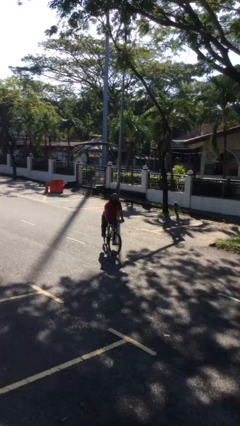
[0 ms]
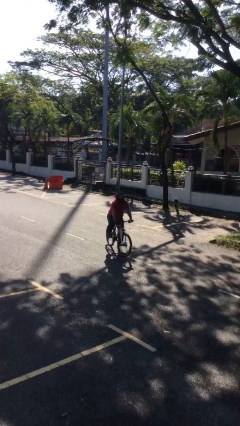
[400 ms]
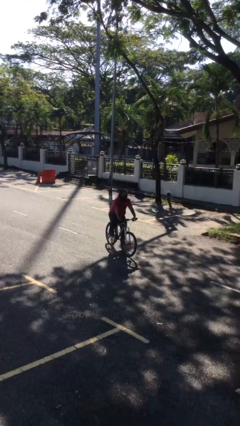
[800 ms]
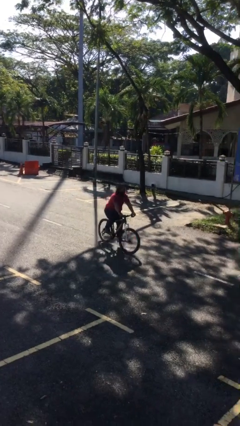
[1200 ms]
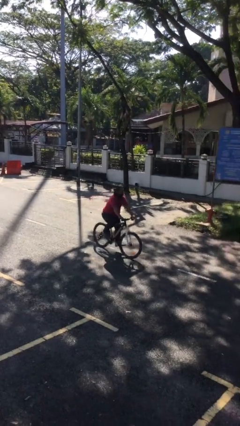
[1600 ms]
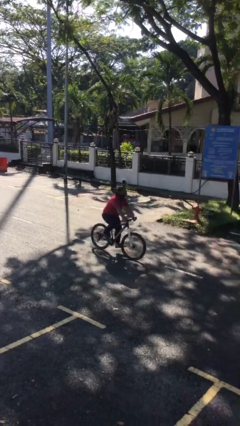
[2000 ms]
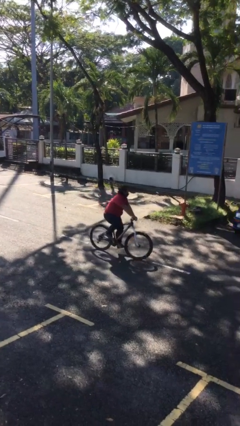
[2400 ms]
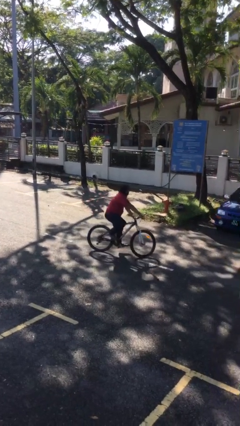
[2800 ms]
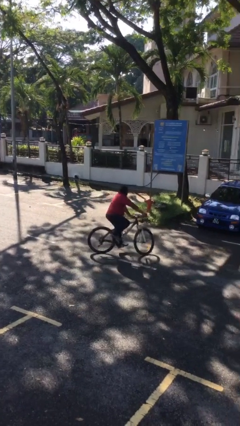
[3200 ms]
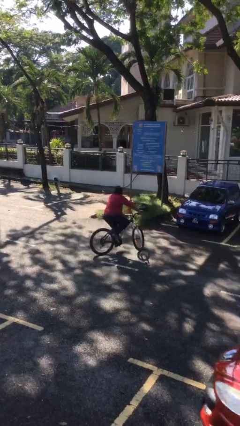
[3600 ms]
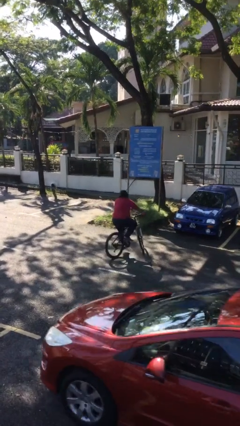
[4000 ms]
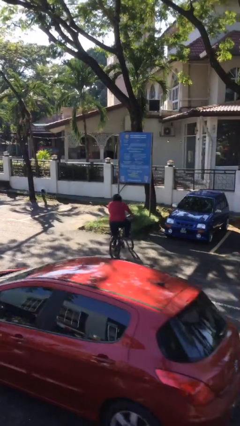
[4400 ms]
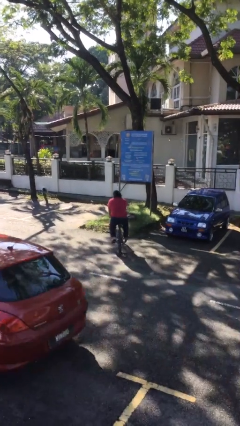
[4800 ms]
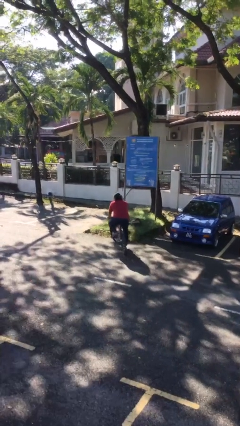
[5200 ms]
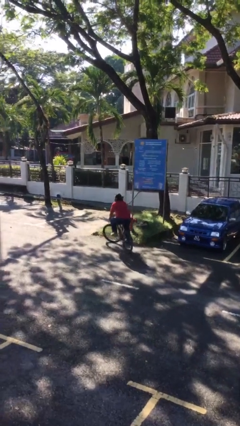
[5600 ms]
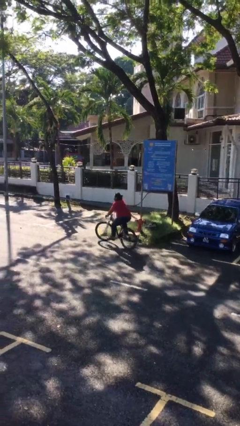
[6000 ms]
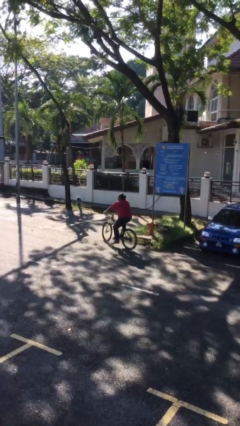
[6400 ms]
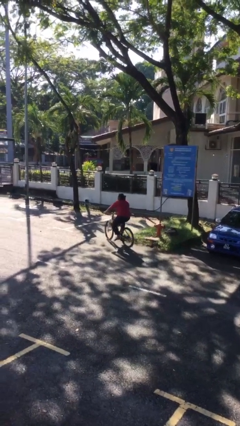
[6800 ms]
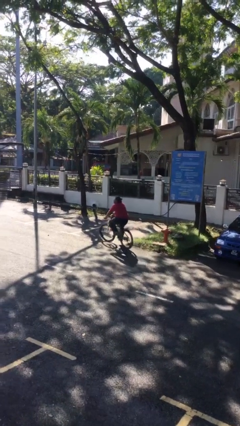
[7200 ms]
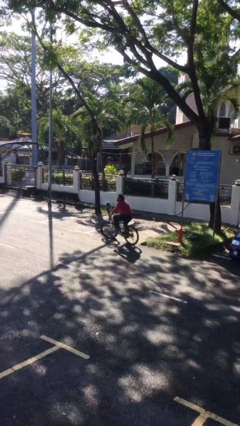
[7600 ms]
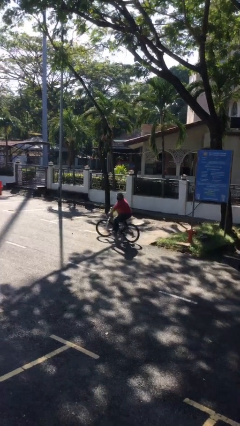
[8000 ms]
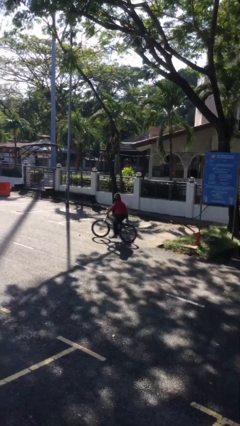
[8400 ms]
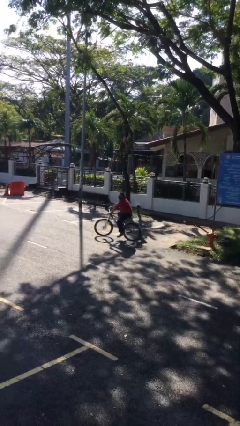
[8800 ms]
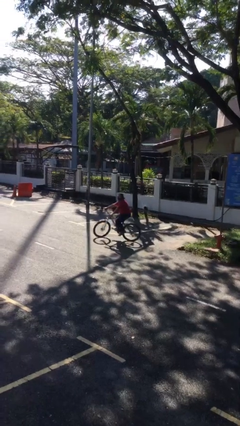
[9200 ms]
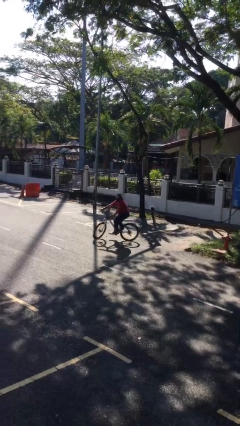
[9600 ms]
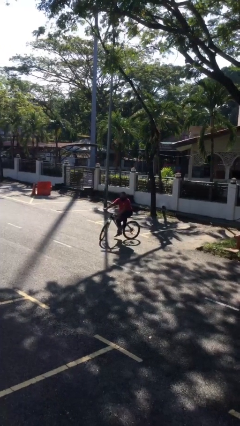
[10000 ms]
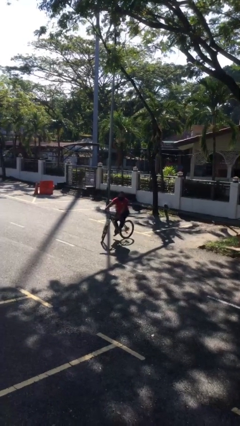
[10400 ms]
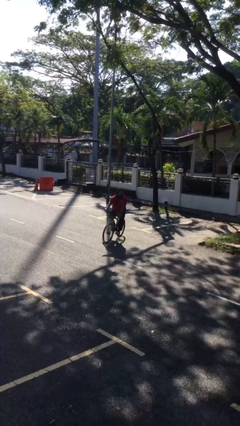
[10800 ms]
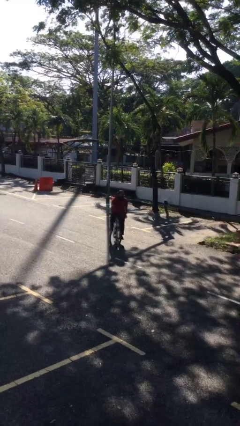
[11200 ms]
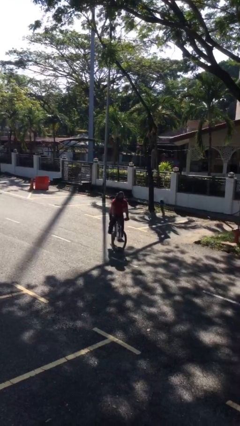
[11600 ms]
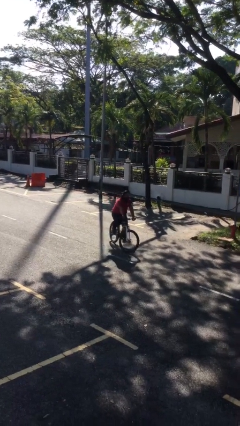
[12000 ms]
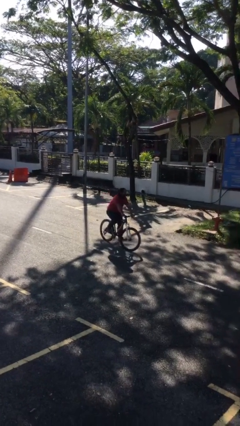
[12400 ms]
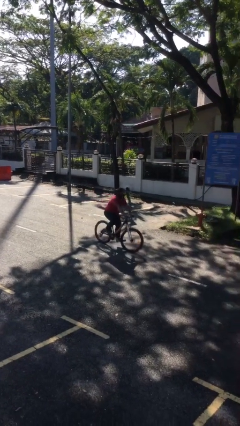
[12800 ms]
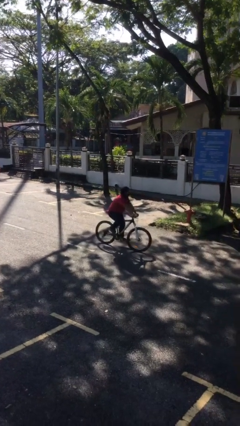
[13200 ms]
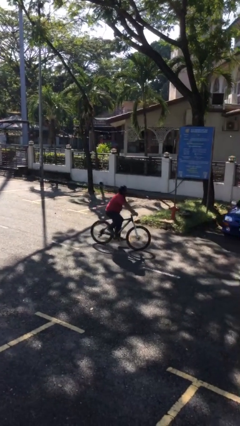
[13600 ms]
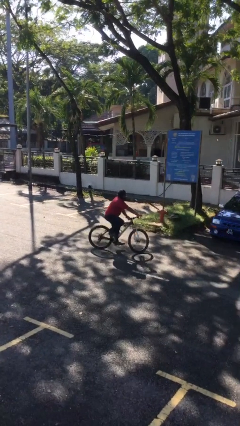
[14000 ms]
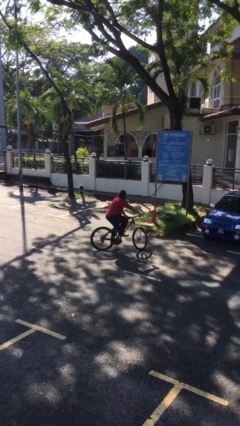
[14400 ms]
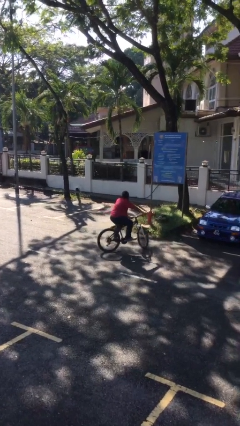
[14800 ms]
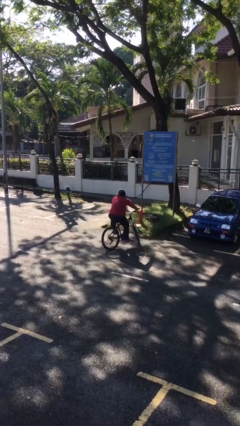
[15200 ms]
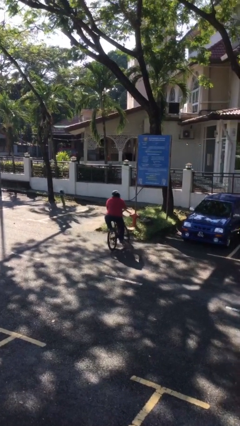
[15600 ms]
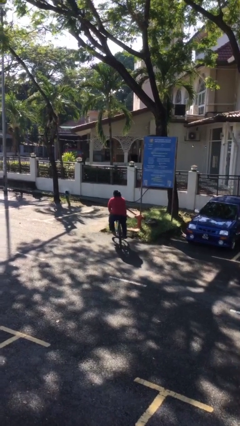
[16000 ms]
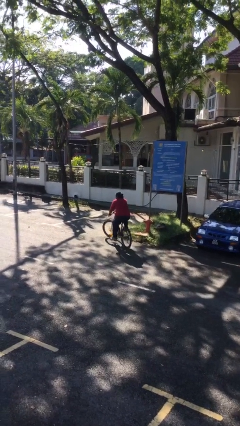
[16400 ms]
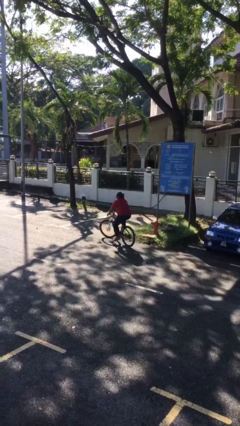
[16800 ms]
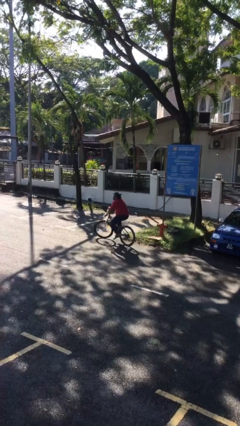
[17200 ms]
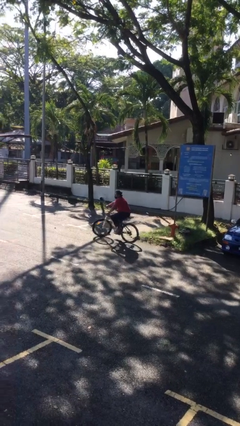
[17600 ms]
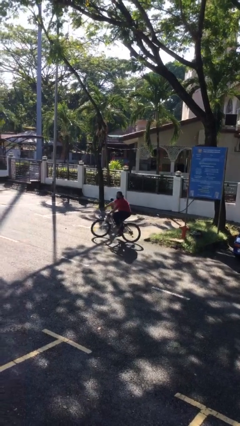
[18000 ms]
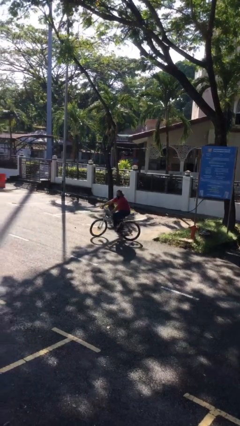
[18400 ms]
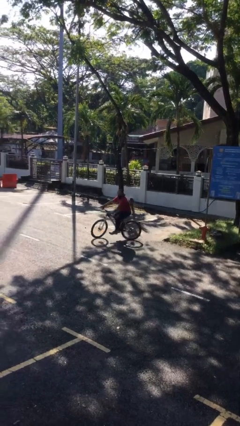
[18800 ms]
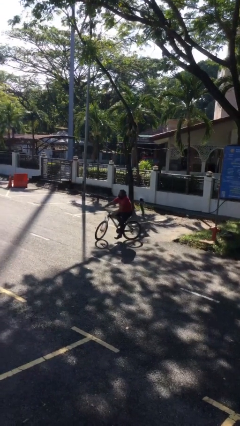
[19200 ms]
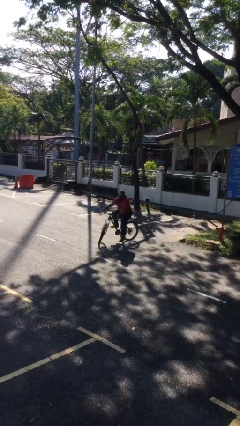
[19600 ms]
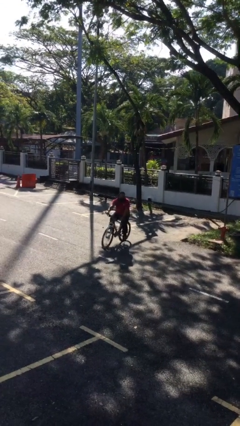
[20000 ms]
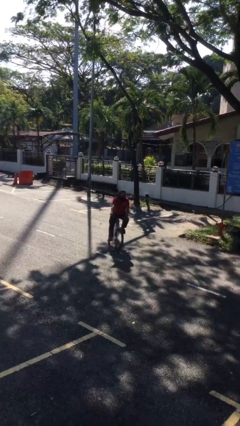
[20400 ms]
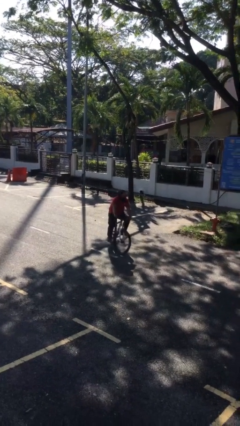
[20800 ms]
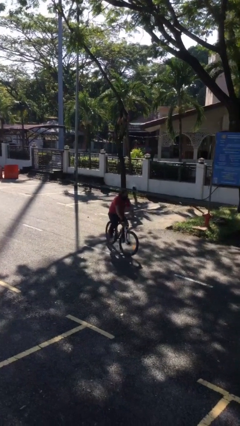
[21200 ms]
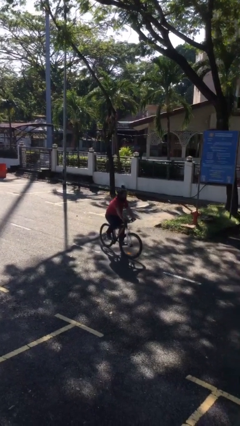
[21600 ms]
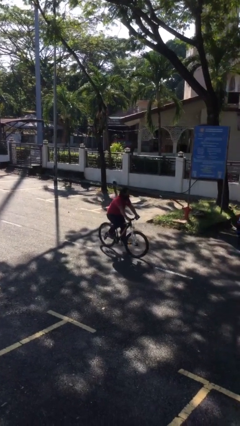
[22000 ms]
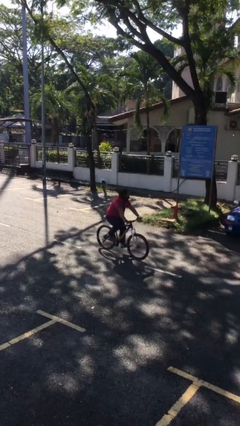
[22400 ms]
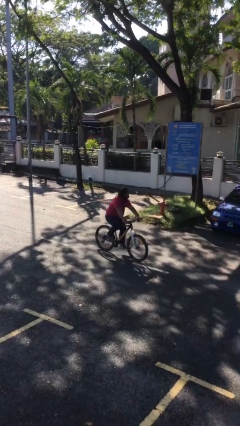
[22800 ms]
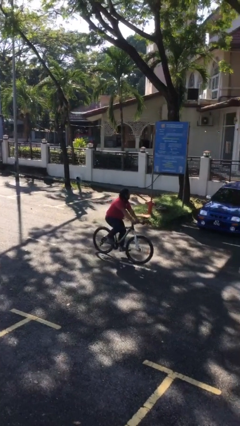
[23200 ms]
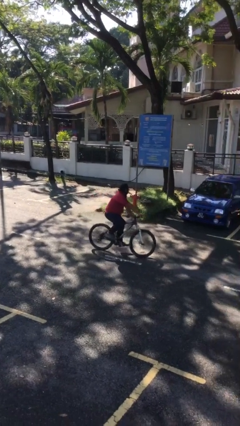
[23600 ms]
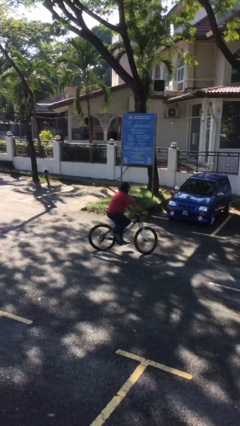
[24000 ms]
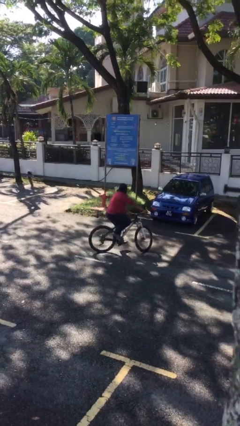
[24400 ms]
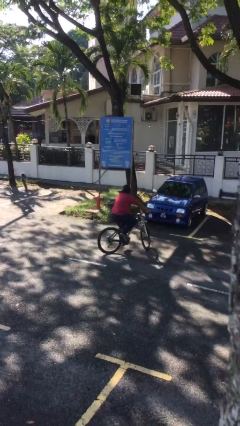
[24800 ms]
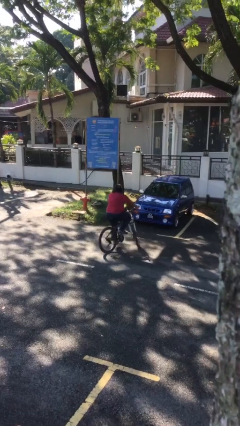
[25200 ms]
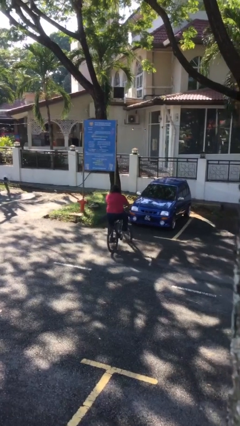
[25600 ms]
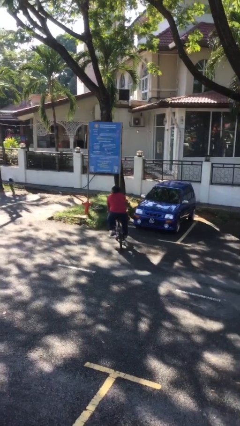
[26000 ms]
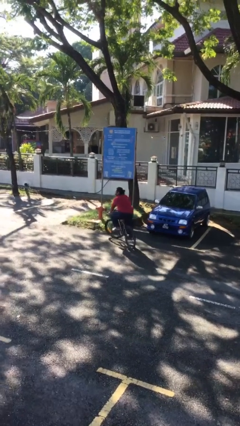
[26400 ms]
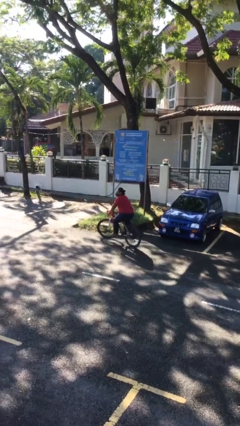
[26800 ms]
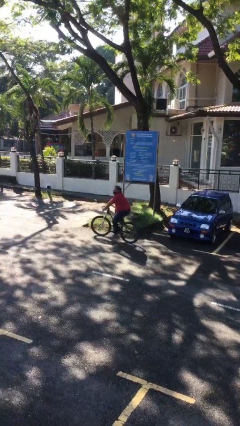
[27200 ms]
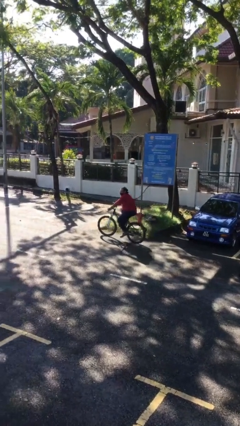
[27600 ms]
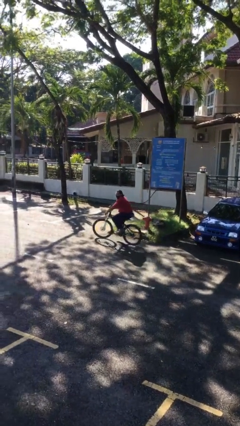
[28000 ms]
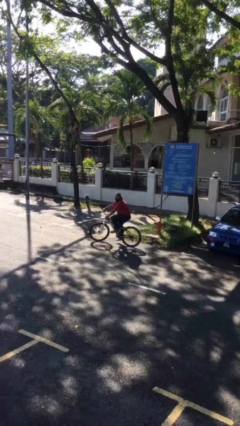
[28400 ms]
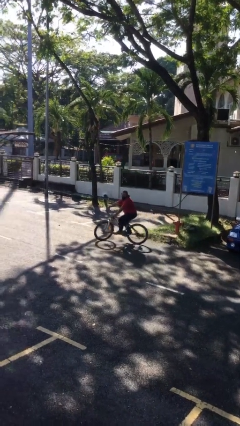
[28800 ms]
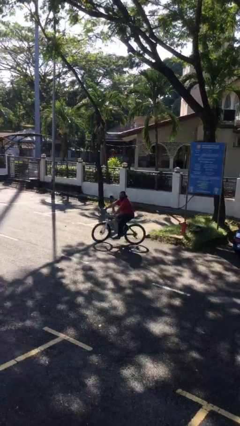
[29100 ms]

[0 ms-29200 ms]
person rides bicycle

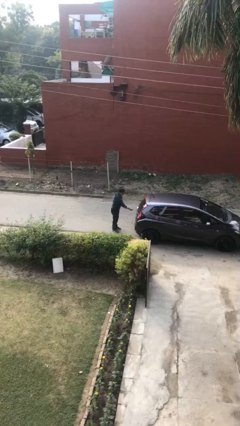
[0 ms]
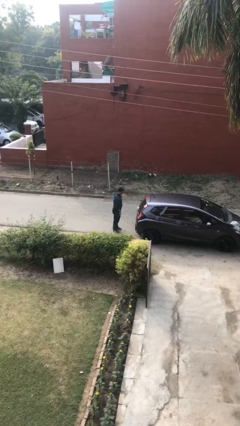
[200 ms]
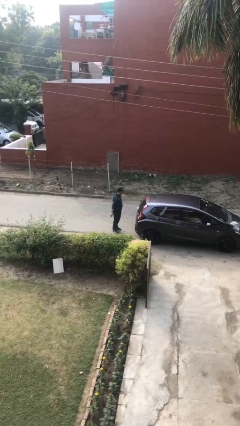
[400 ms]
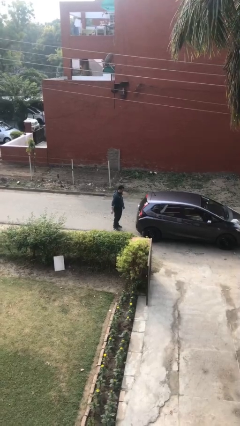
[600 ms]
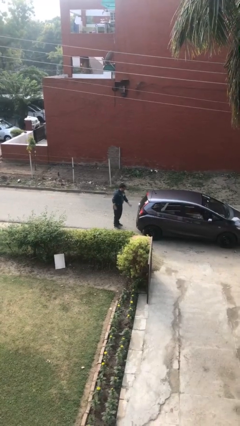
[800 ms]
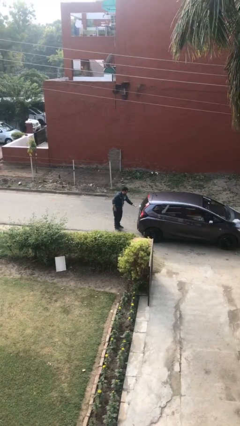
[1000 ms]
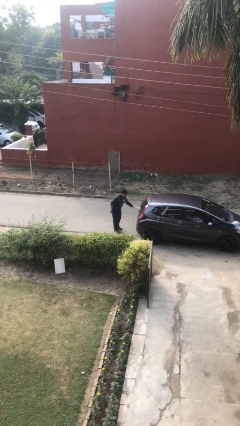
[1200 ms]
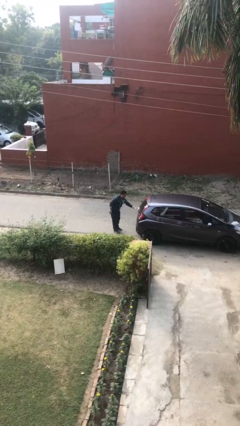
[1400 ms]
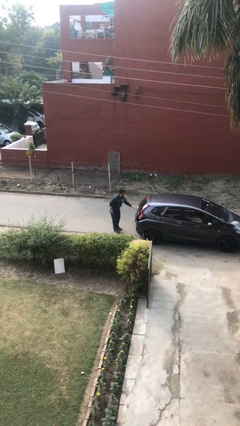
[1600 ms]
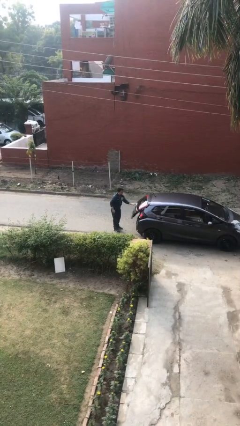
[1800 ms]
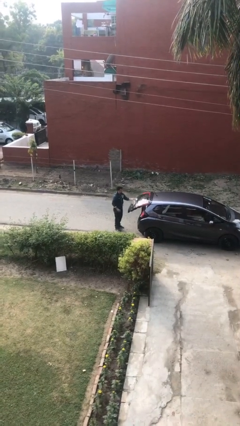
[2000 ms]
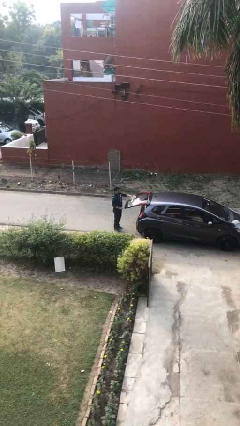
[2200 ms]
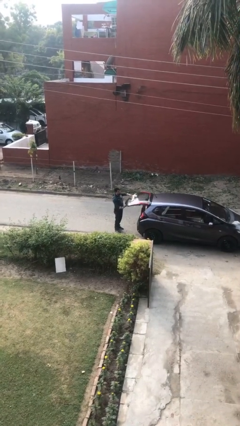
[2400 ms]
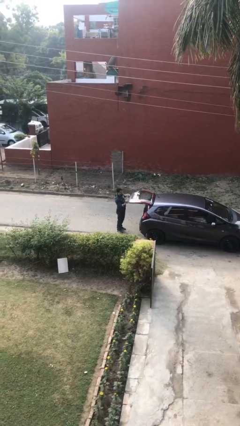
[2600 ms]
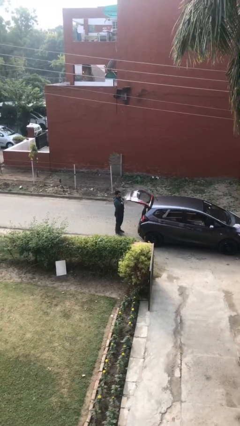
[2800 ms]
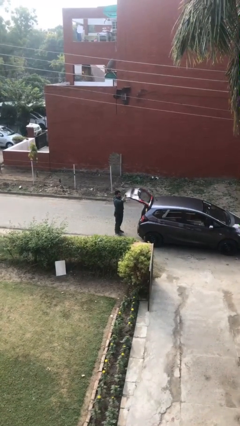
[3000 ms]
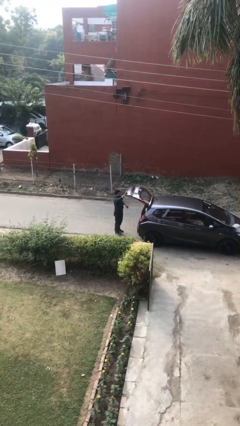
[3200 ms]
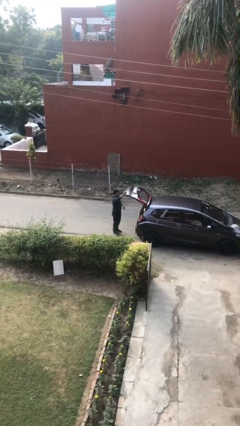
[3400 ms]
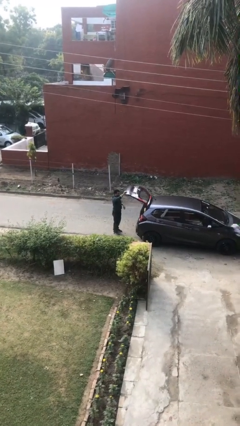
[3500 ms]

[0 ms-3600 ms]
person opens car trunk
